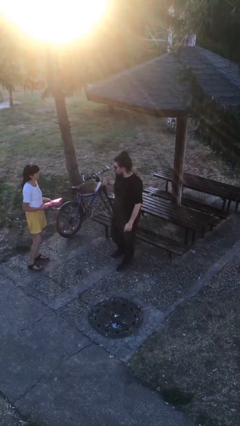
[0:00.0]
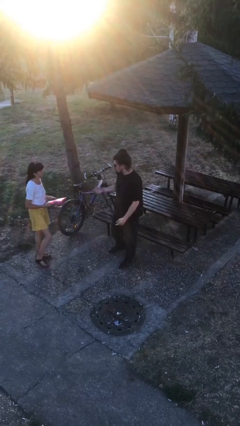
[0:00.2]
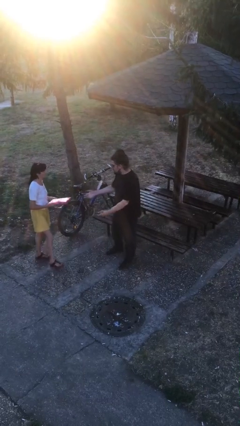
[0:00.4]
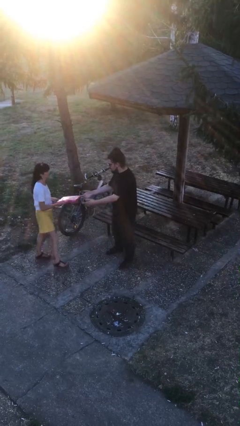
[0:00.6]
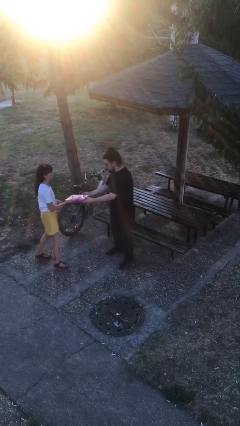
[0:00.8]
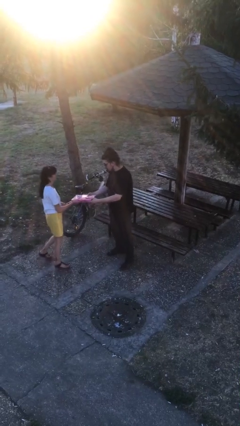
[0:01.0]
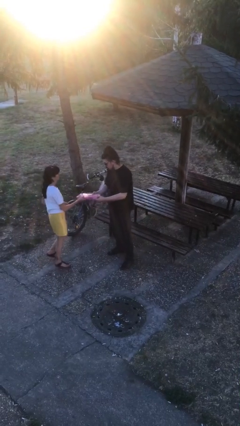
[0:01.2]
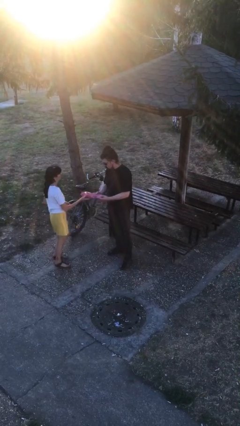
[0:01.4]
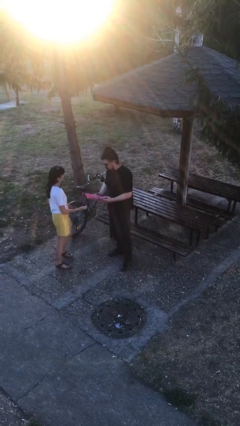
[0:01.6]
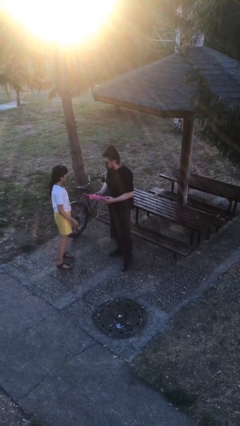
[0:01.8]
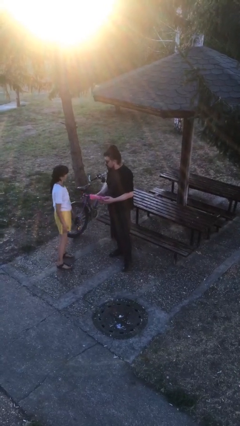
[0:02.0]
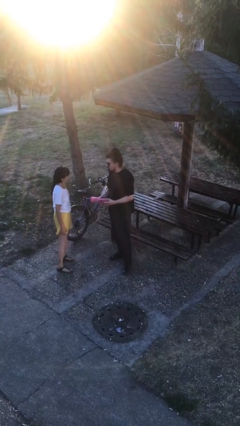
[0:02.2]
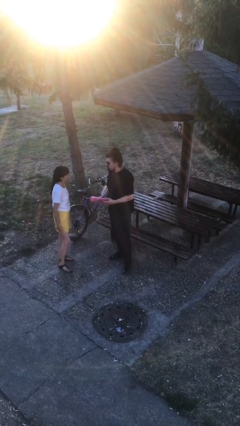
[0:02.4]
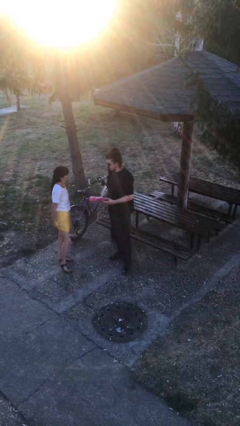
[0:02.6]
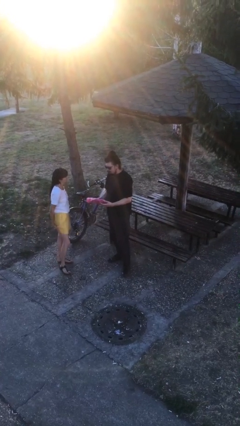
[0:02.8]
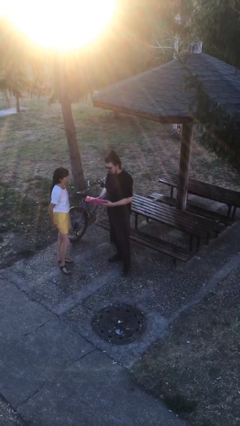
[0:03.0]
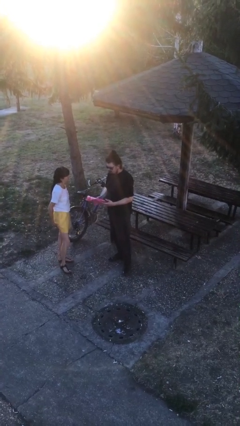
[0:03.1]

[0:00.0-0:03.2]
person transfers object to person

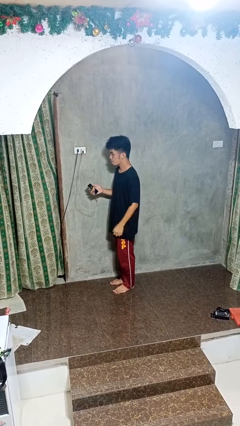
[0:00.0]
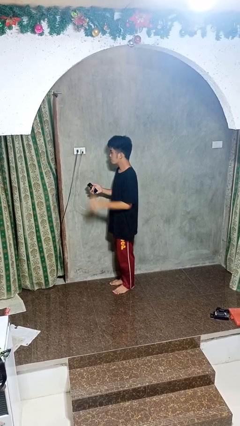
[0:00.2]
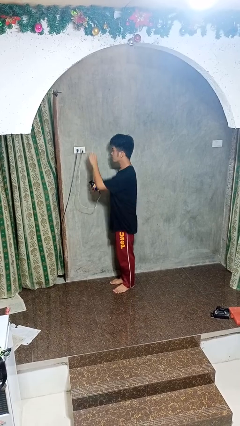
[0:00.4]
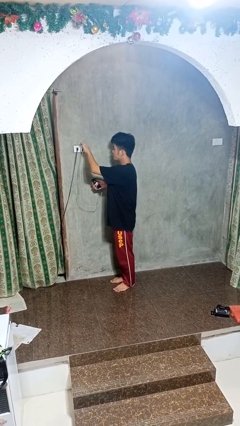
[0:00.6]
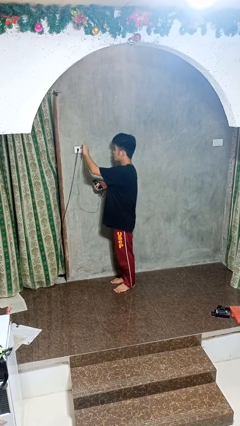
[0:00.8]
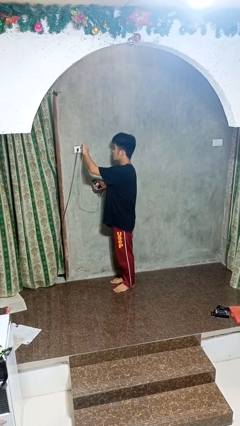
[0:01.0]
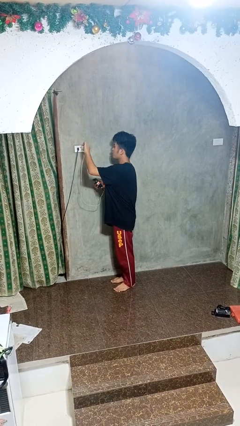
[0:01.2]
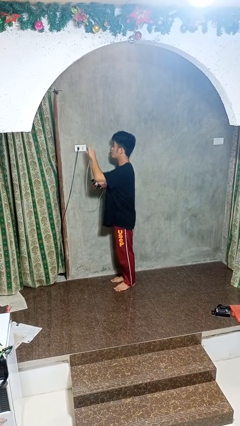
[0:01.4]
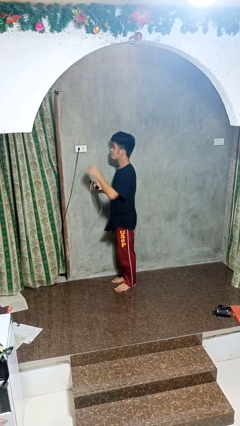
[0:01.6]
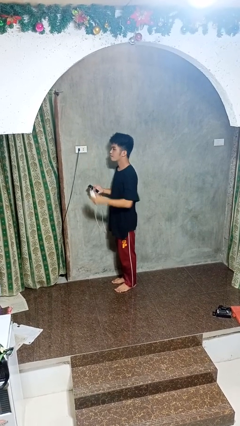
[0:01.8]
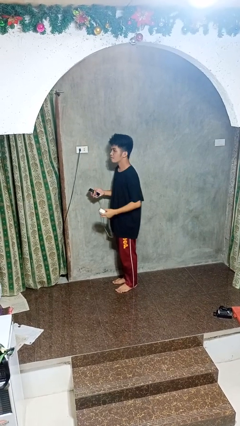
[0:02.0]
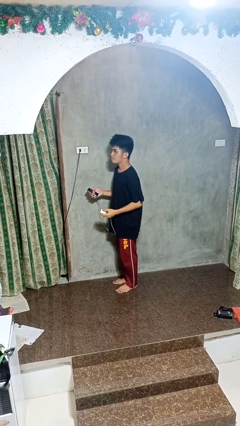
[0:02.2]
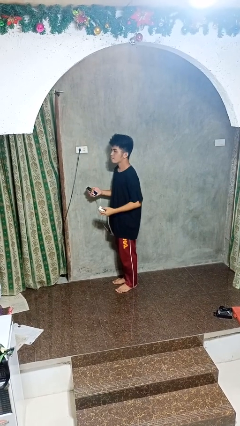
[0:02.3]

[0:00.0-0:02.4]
person unplugs from electrical socket

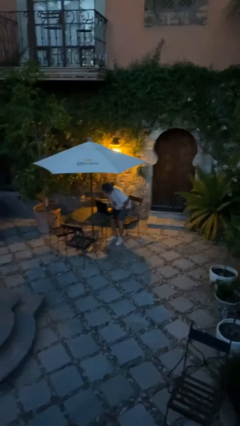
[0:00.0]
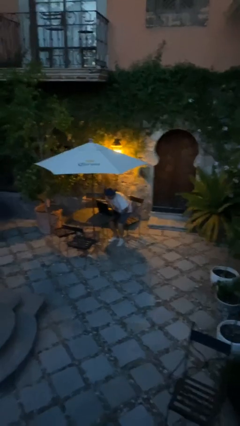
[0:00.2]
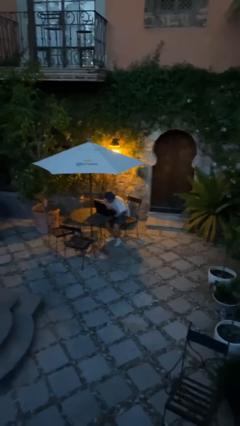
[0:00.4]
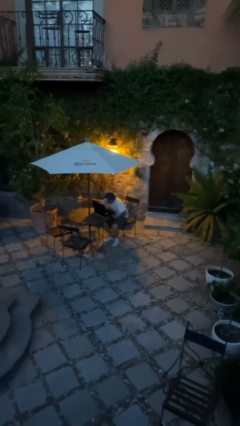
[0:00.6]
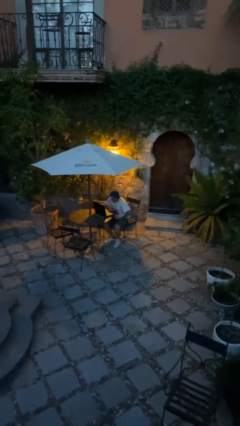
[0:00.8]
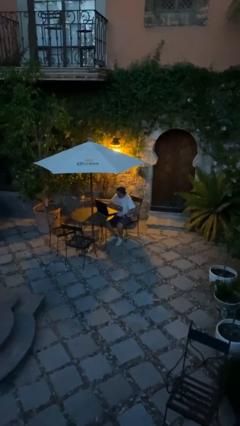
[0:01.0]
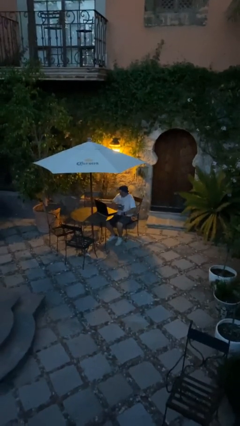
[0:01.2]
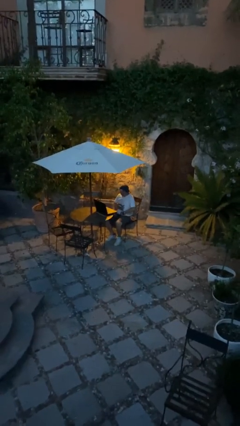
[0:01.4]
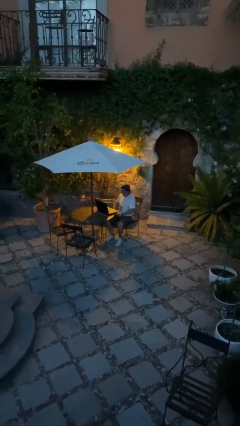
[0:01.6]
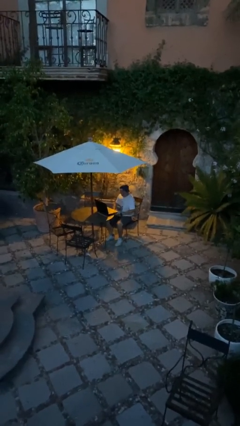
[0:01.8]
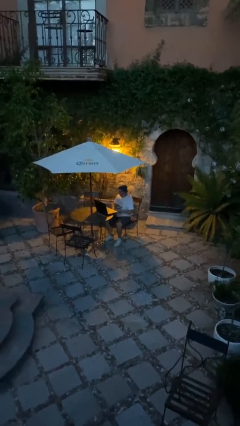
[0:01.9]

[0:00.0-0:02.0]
person sits down

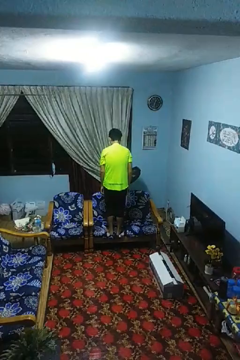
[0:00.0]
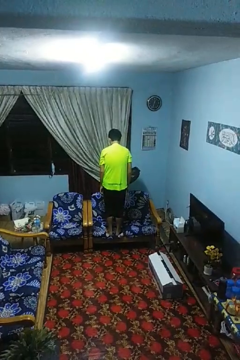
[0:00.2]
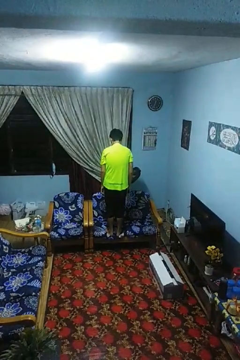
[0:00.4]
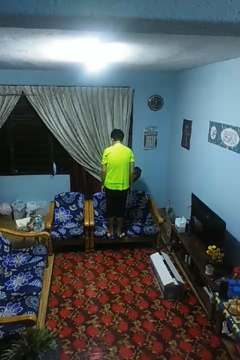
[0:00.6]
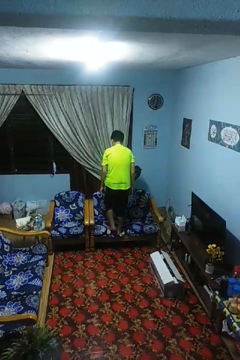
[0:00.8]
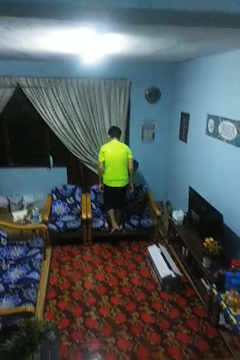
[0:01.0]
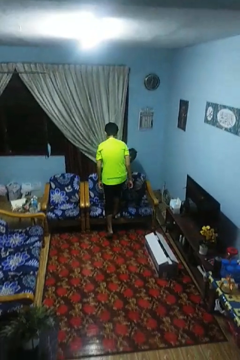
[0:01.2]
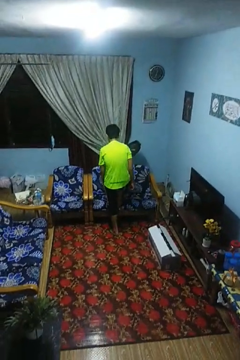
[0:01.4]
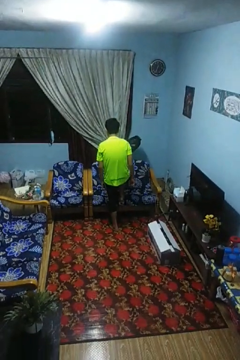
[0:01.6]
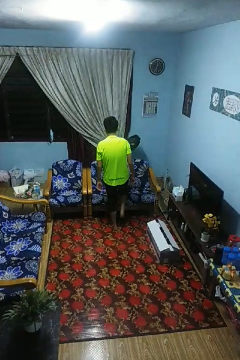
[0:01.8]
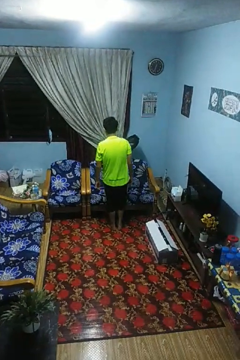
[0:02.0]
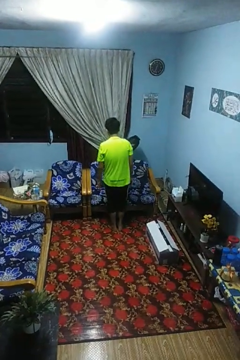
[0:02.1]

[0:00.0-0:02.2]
person climbs off couch

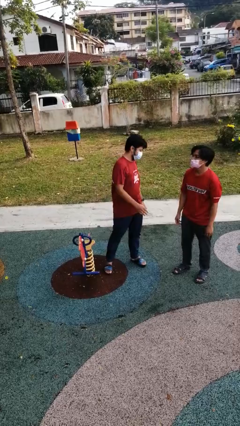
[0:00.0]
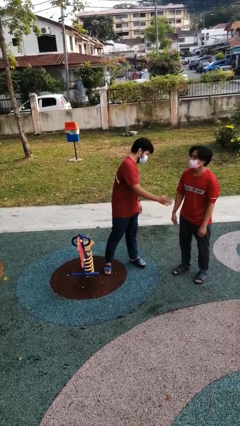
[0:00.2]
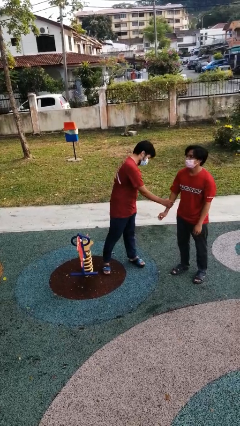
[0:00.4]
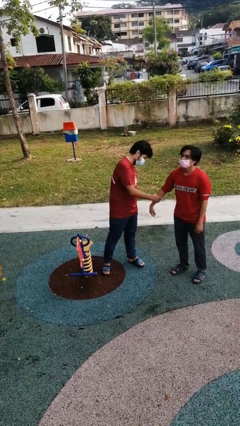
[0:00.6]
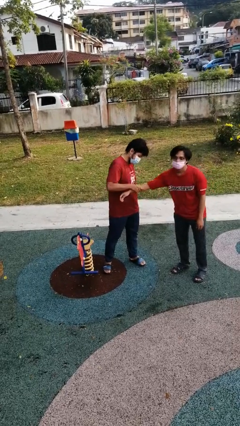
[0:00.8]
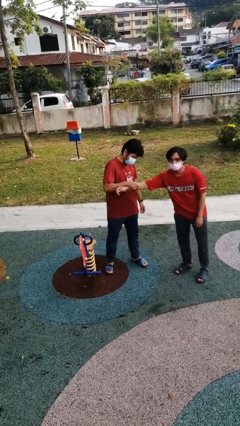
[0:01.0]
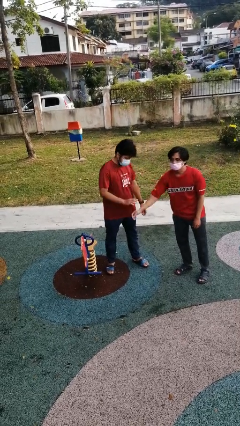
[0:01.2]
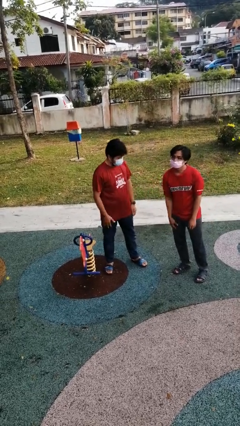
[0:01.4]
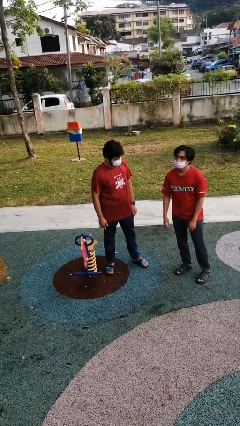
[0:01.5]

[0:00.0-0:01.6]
person grabs person by forearm

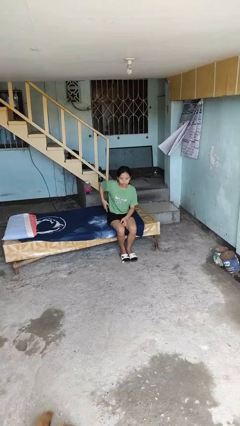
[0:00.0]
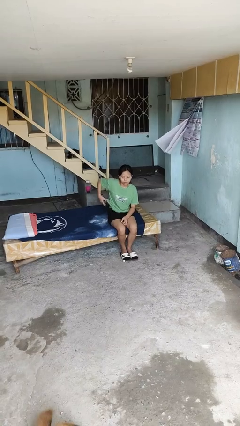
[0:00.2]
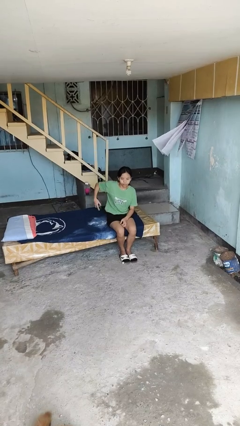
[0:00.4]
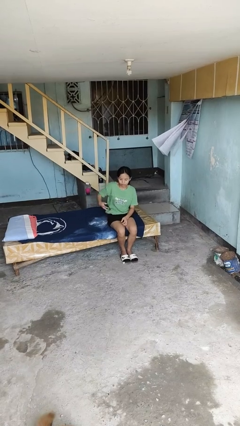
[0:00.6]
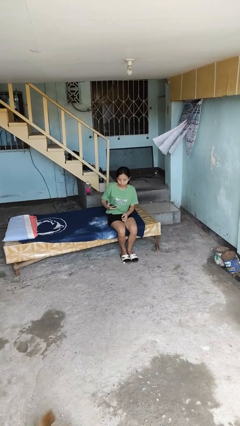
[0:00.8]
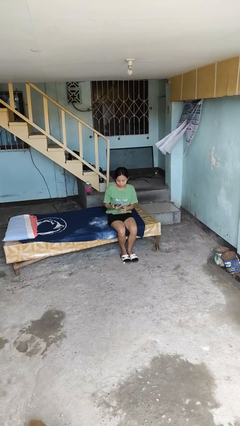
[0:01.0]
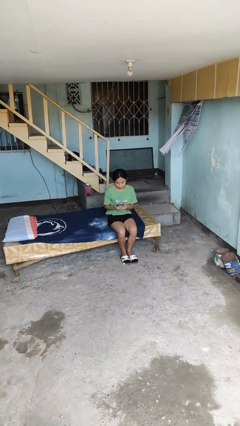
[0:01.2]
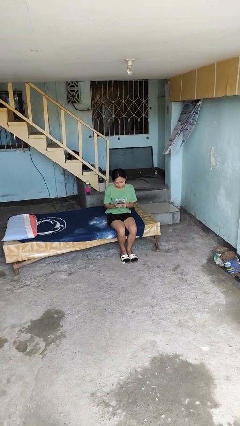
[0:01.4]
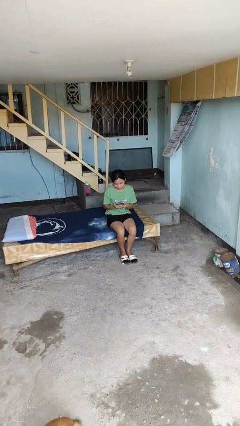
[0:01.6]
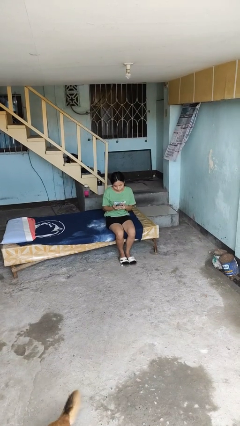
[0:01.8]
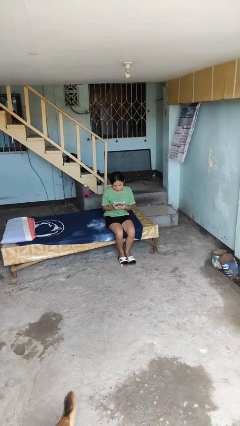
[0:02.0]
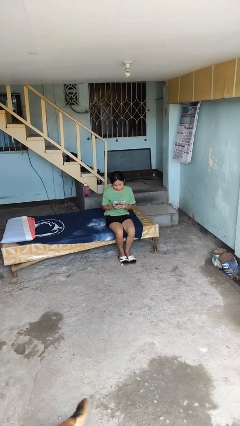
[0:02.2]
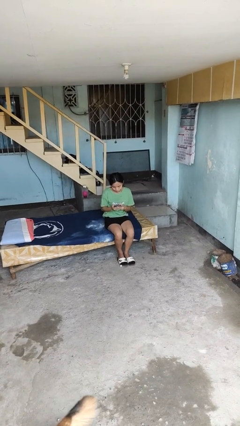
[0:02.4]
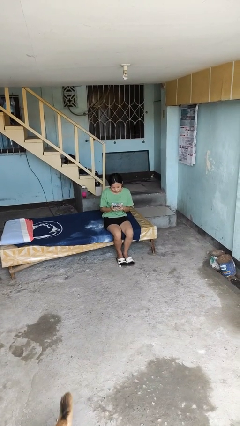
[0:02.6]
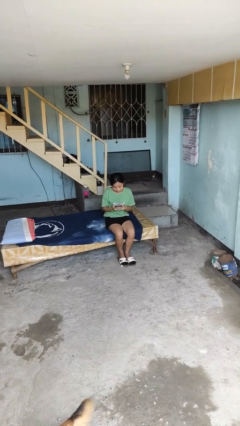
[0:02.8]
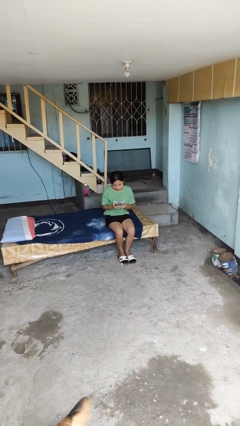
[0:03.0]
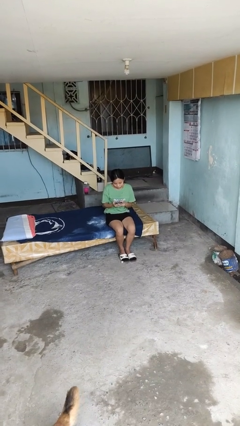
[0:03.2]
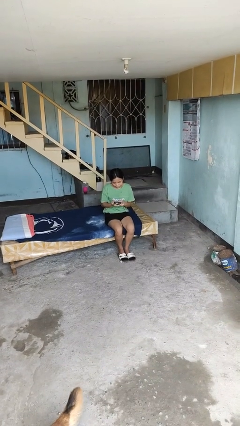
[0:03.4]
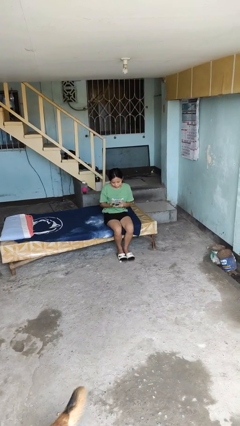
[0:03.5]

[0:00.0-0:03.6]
person takes phone from pocket

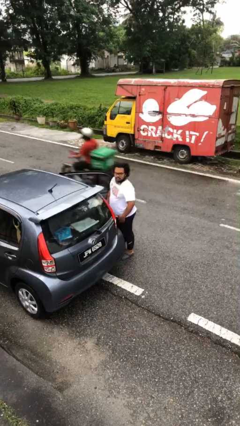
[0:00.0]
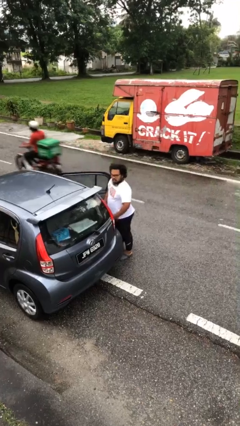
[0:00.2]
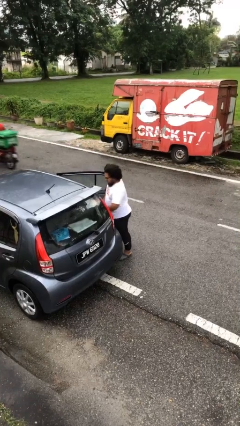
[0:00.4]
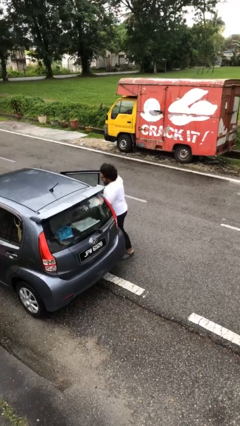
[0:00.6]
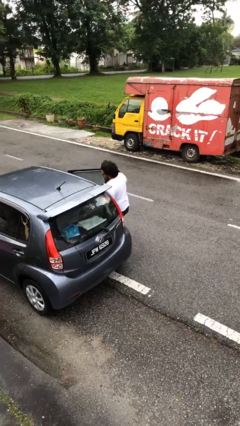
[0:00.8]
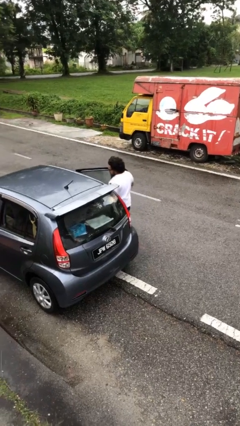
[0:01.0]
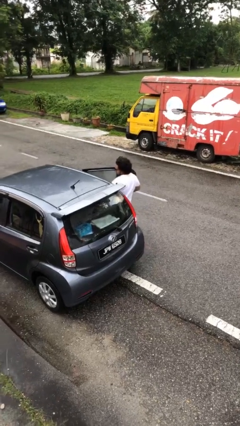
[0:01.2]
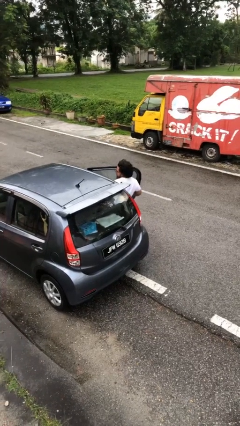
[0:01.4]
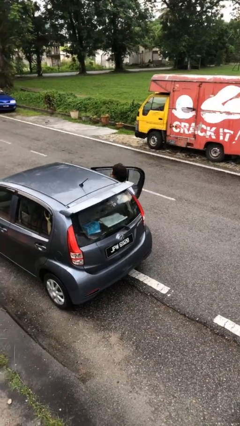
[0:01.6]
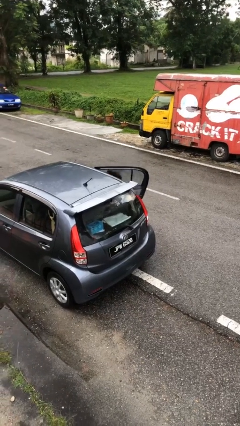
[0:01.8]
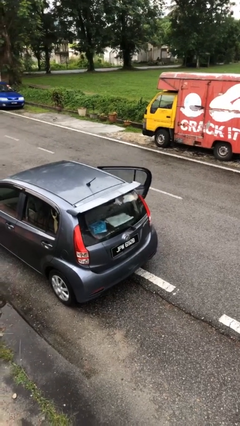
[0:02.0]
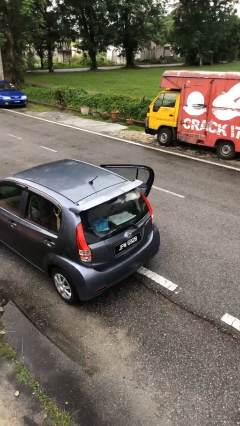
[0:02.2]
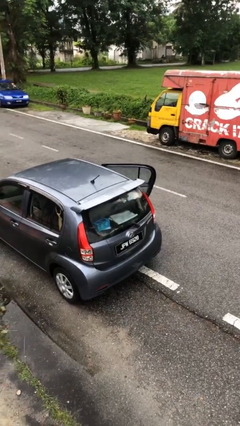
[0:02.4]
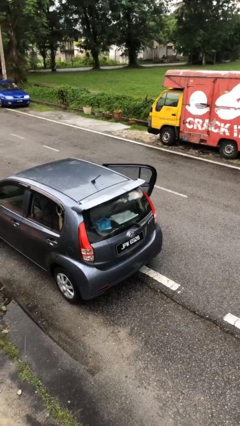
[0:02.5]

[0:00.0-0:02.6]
person enters car
